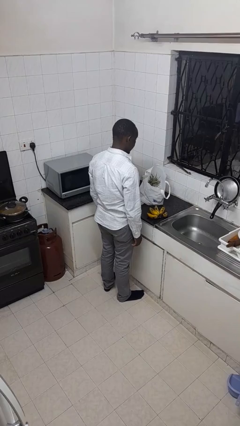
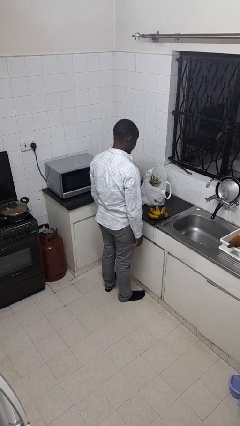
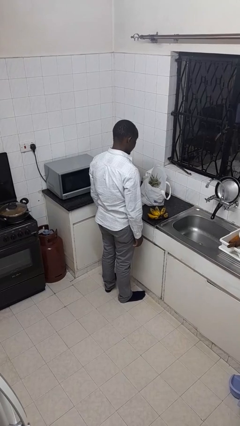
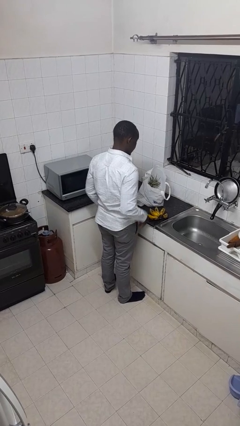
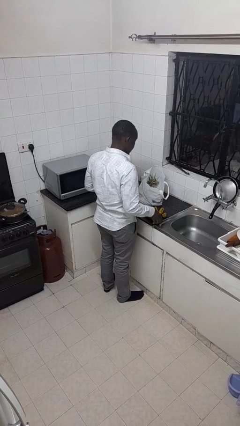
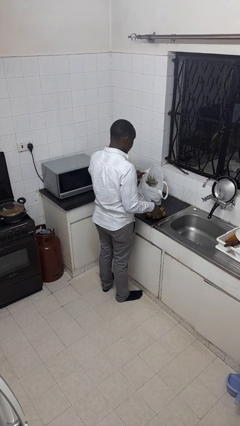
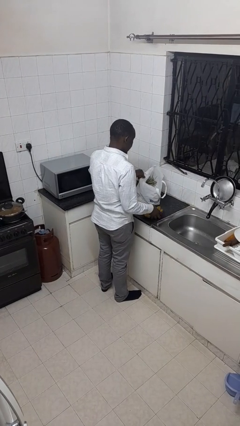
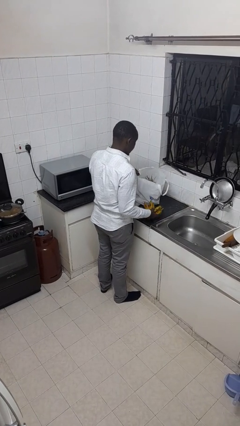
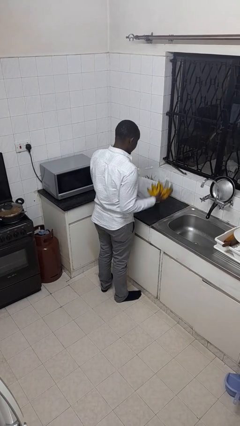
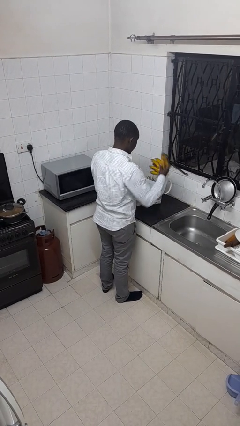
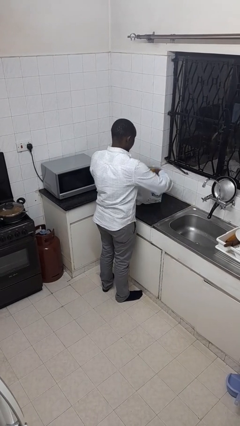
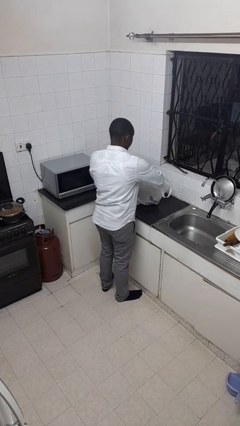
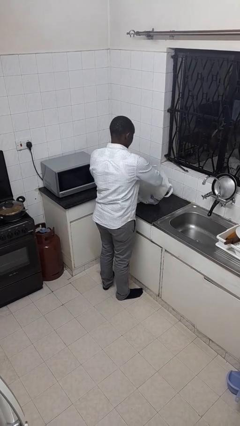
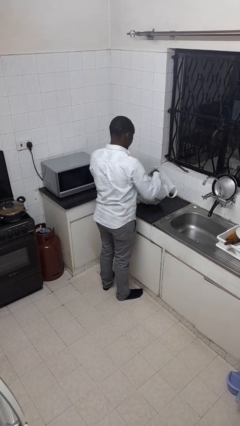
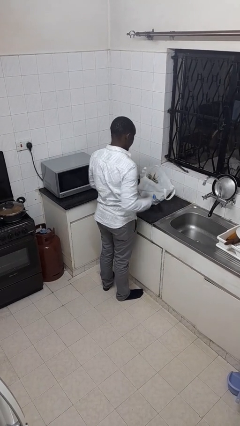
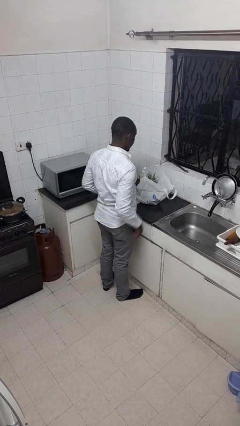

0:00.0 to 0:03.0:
person puts object into bag

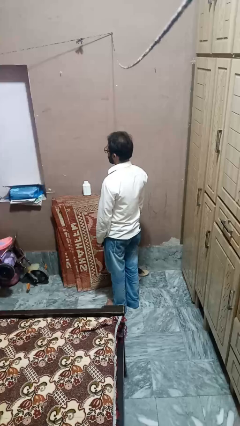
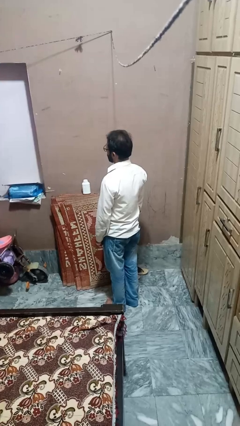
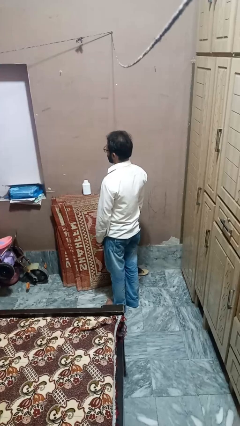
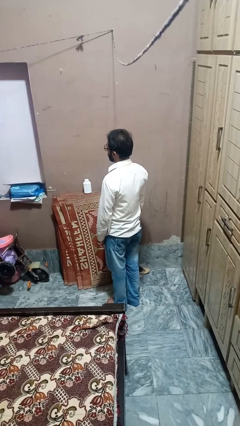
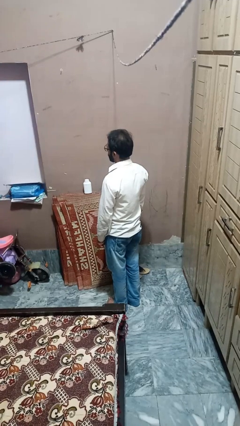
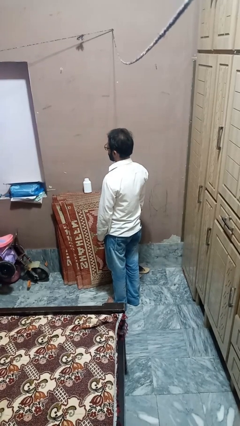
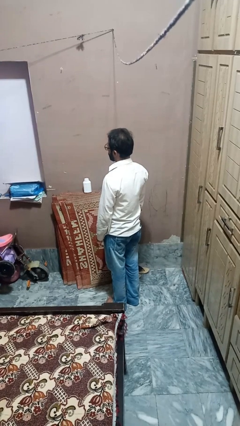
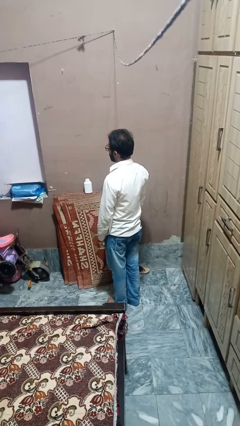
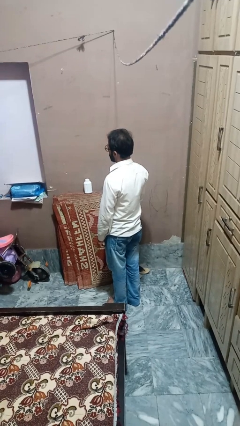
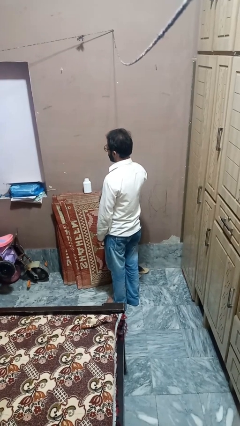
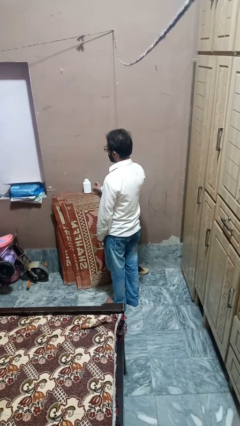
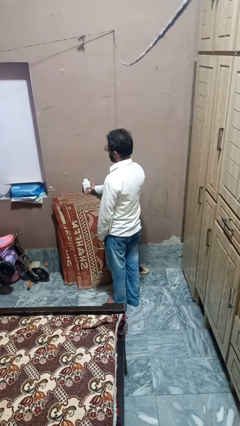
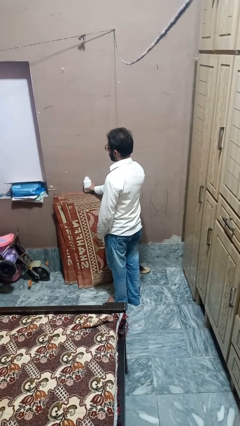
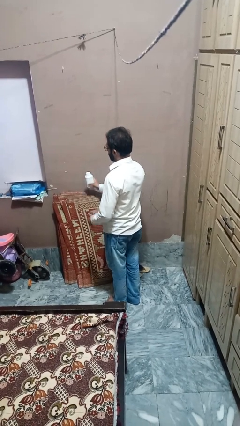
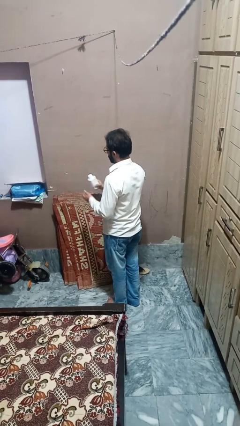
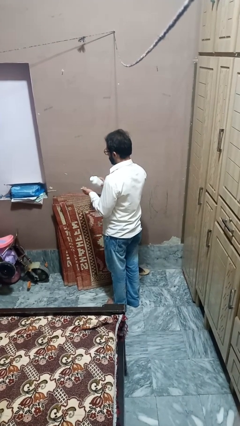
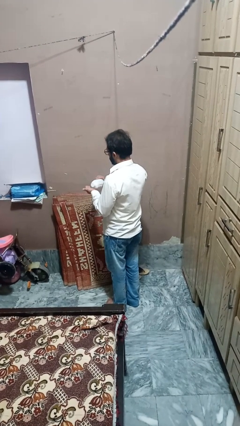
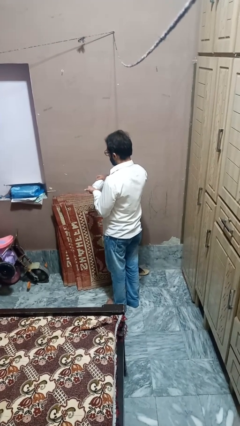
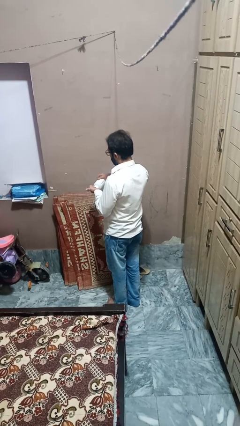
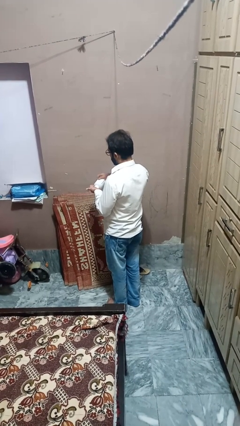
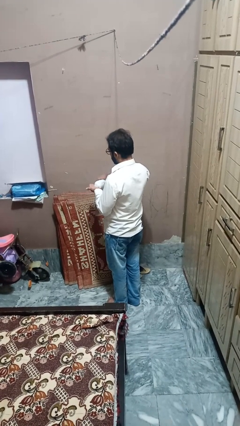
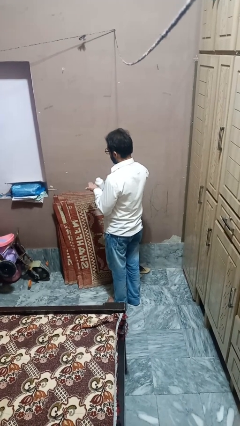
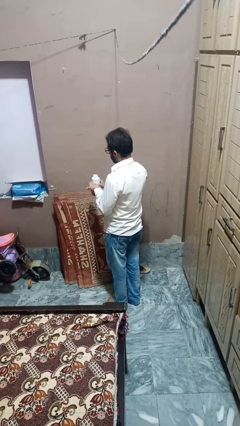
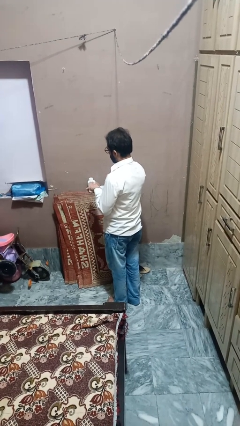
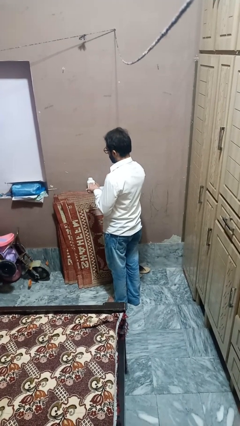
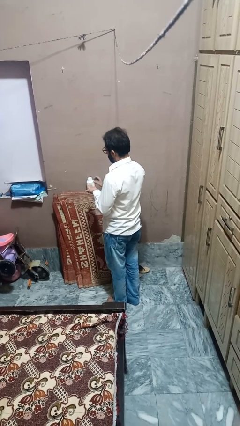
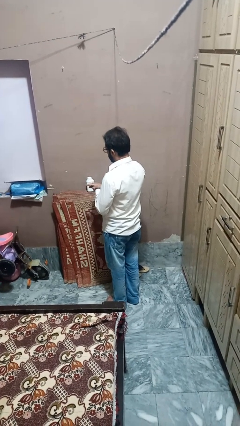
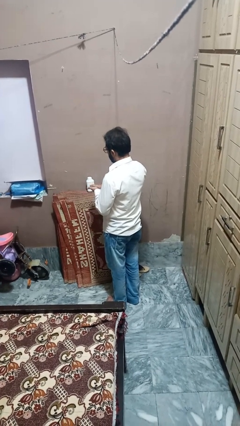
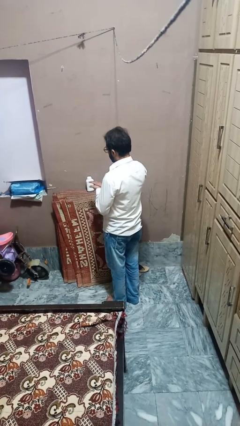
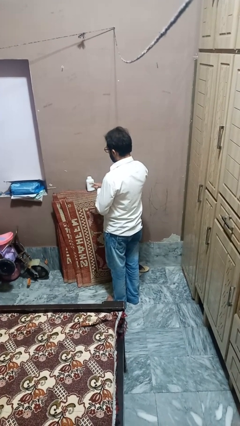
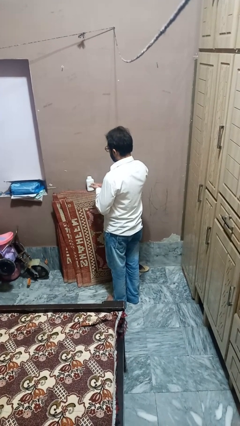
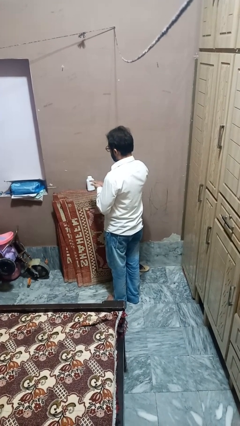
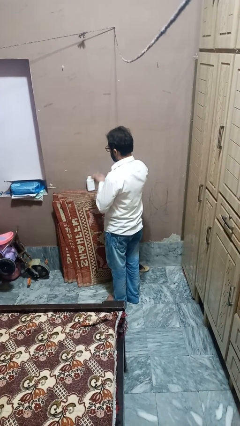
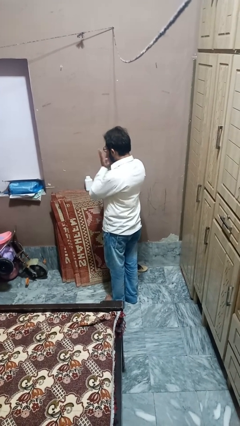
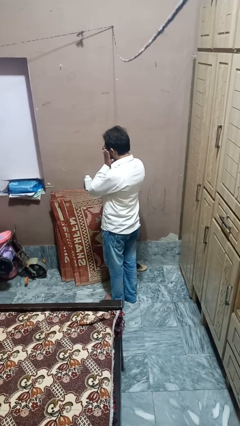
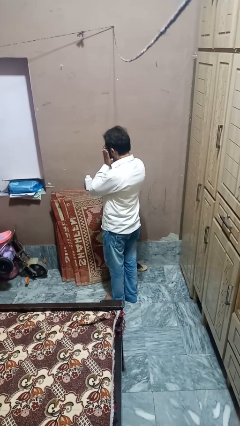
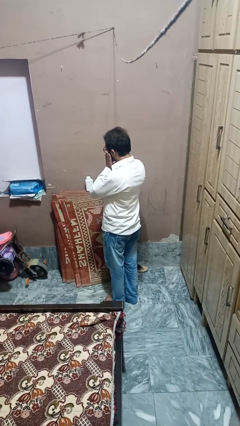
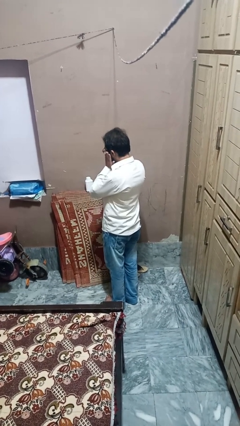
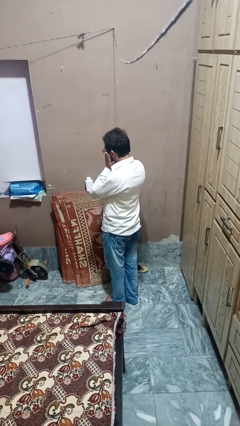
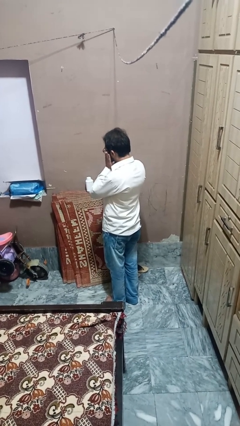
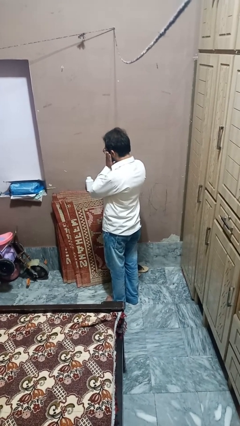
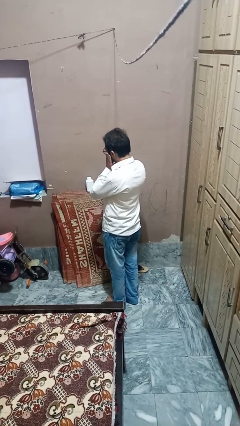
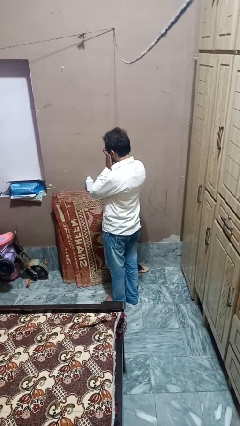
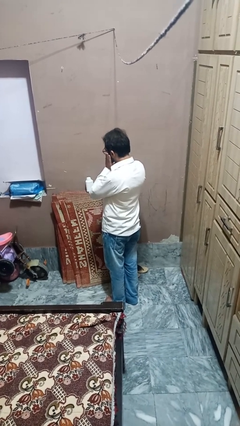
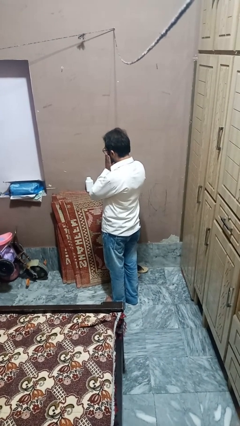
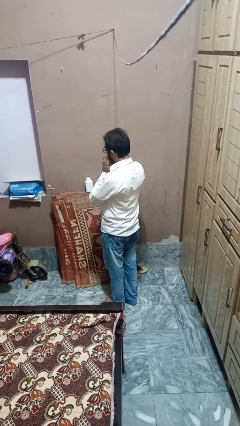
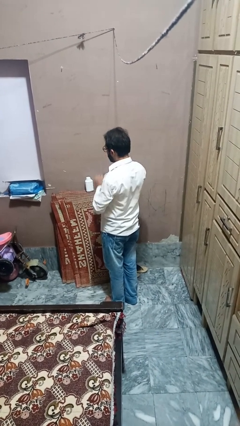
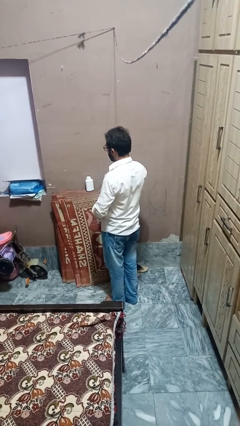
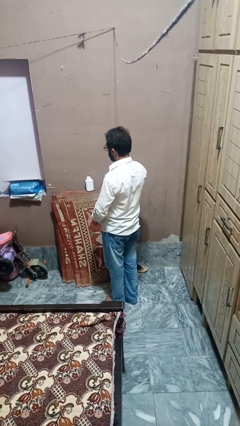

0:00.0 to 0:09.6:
person applies facial moisturizer

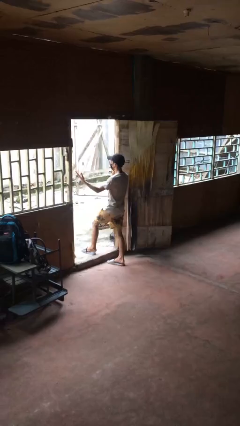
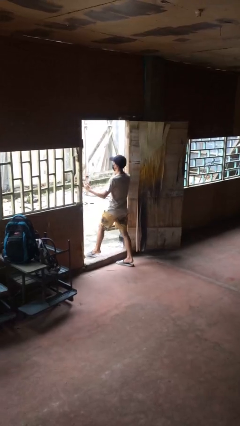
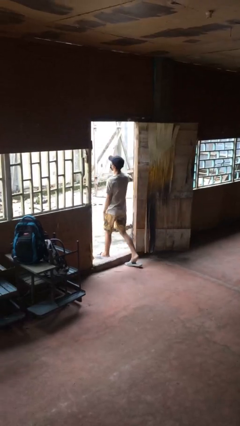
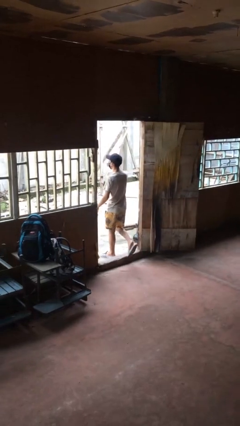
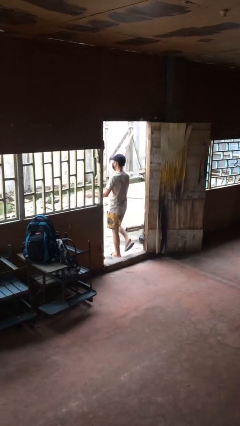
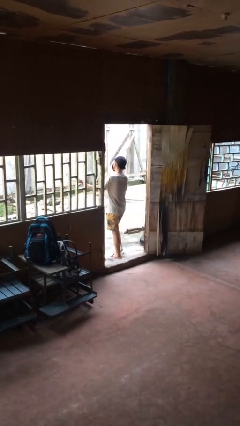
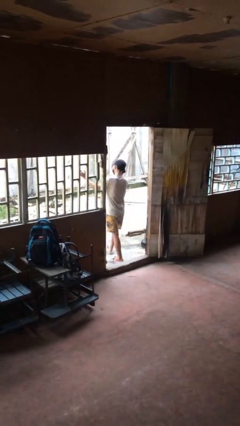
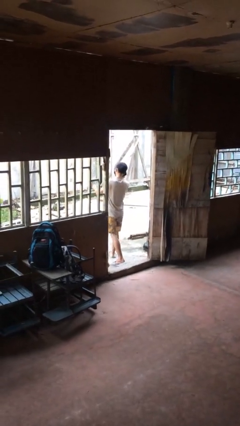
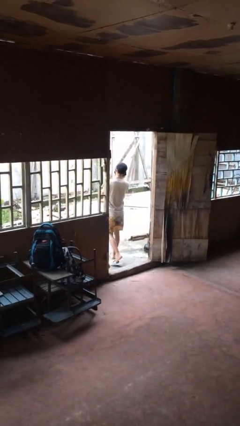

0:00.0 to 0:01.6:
person exits scene through structure

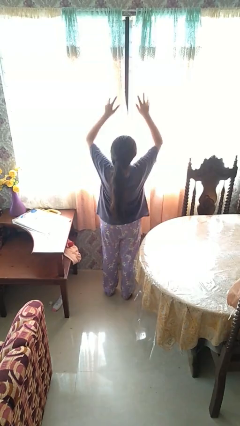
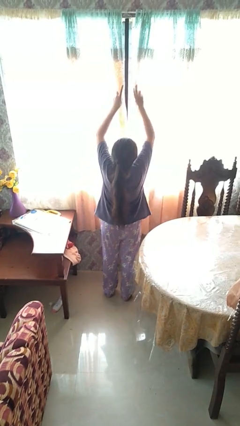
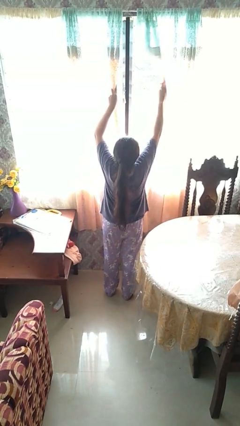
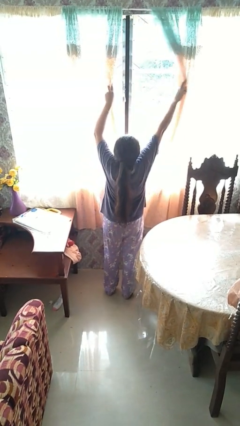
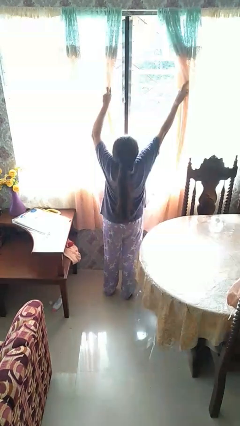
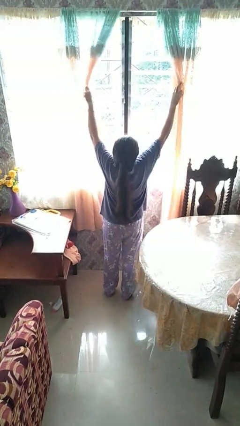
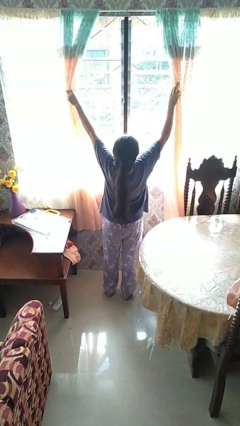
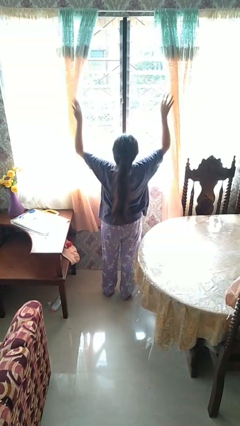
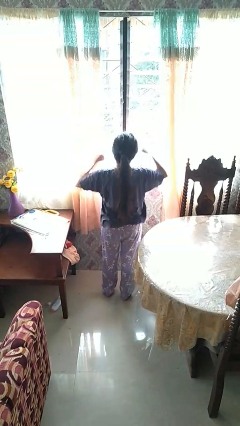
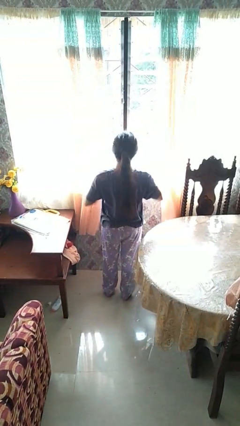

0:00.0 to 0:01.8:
person opens curtains

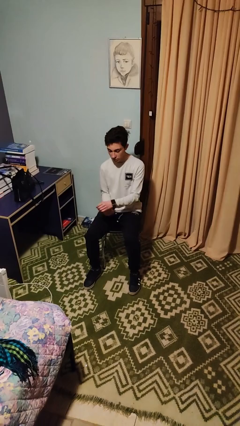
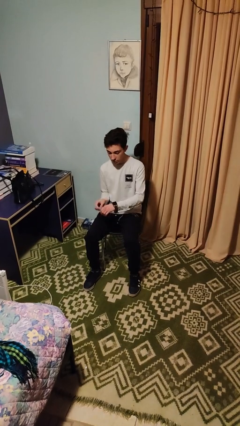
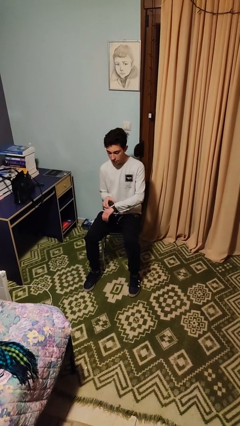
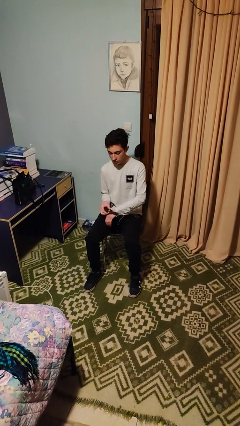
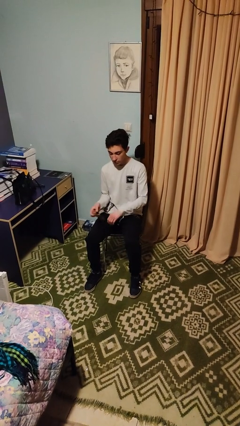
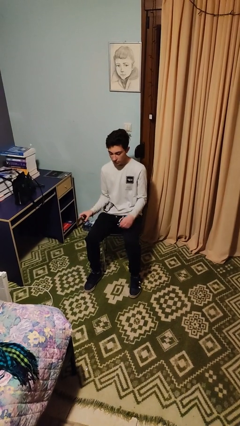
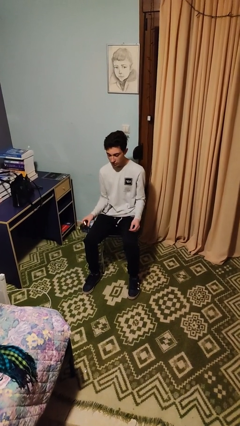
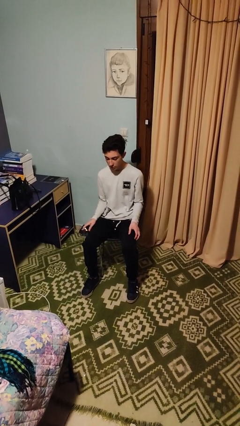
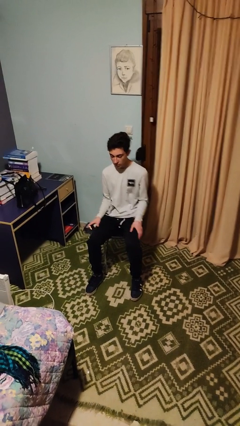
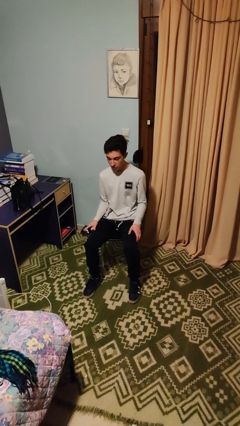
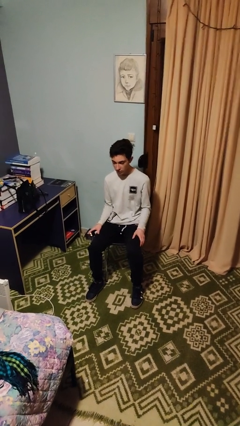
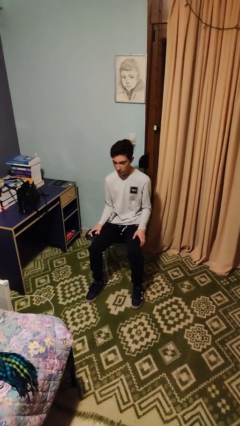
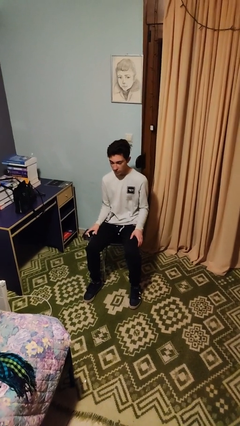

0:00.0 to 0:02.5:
person takes off wristwatch
